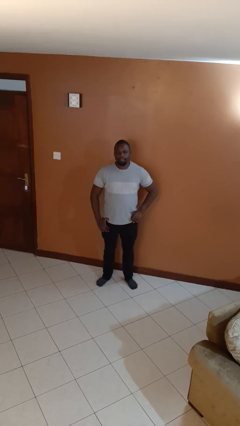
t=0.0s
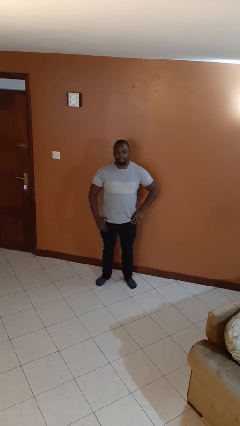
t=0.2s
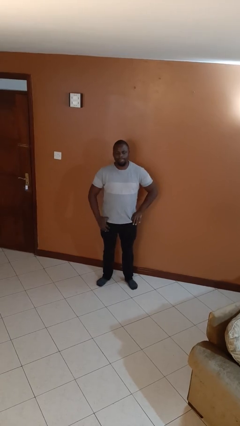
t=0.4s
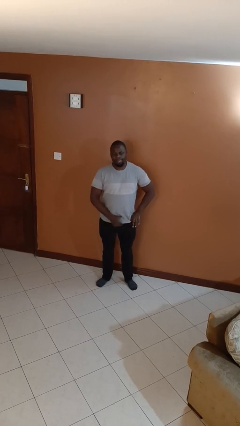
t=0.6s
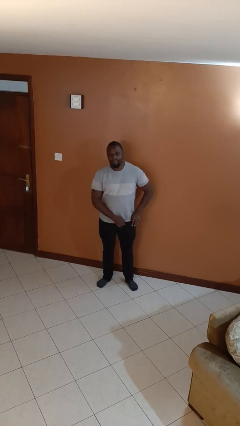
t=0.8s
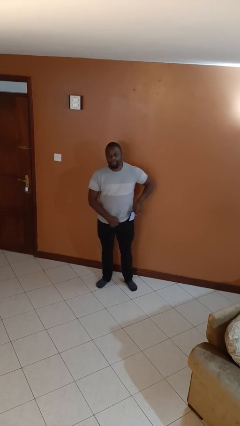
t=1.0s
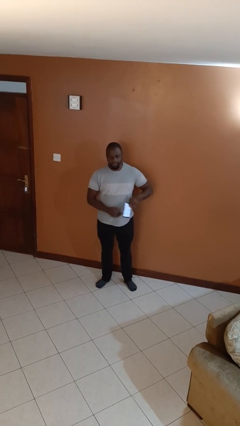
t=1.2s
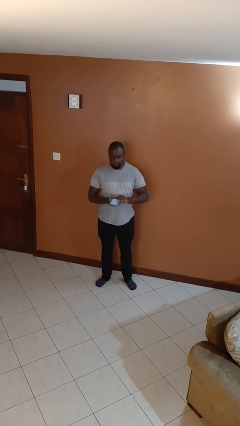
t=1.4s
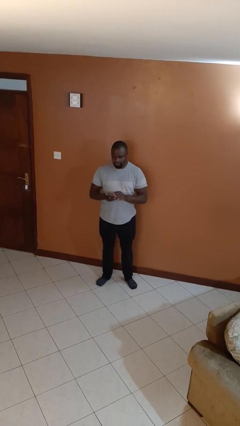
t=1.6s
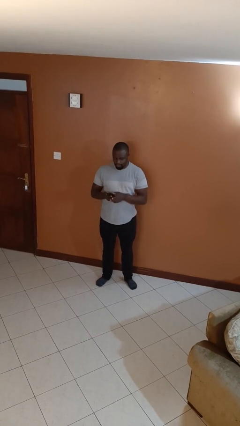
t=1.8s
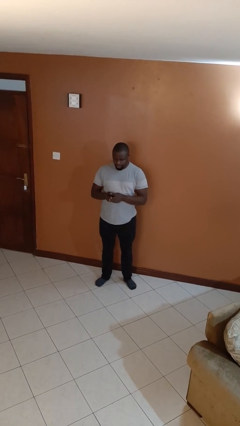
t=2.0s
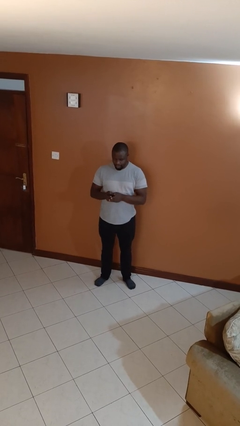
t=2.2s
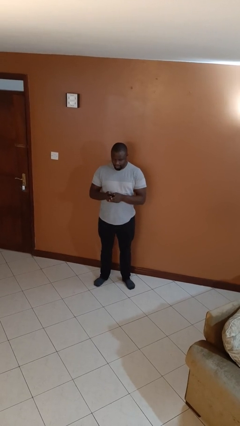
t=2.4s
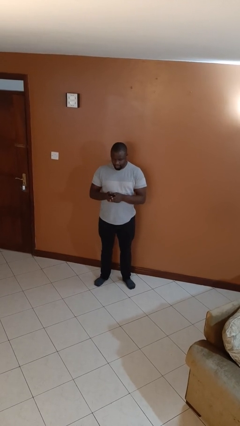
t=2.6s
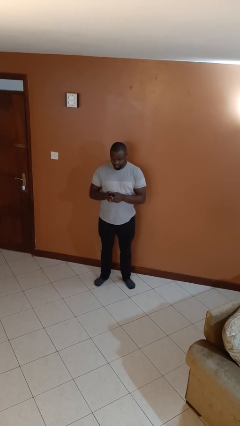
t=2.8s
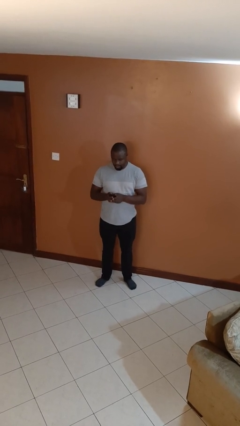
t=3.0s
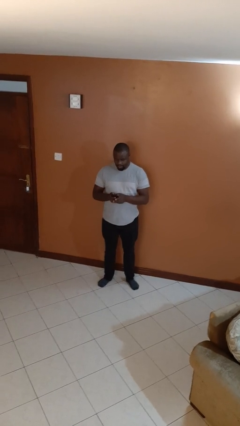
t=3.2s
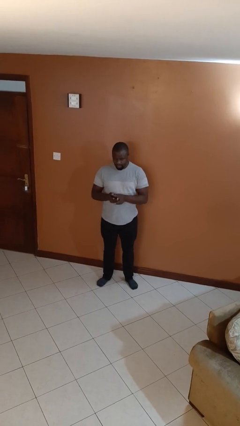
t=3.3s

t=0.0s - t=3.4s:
person takes phone from pocket

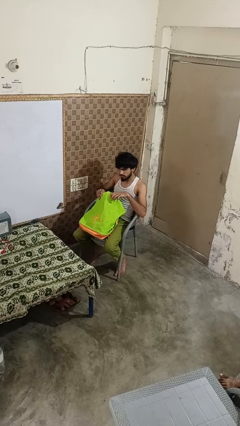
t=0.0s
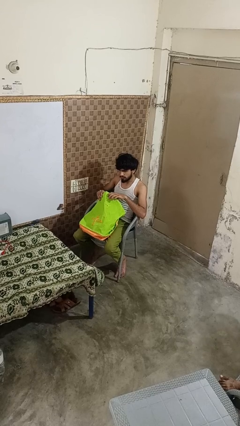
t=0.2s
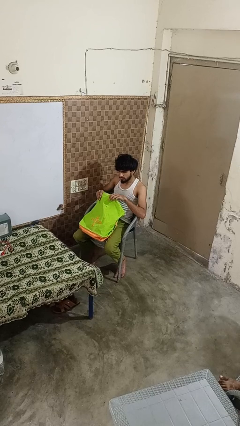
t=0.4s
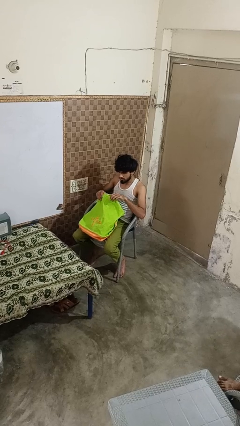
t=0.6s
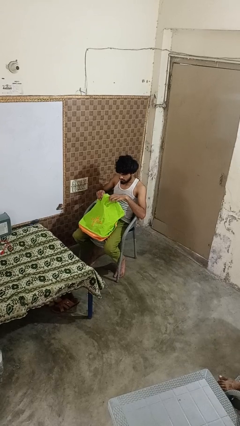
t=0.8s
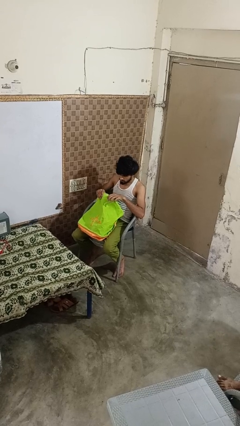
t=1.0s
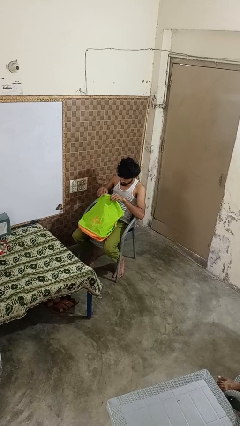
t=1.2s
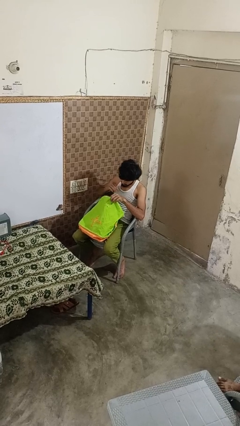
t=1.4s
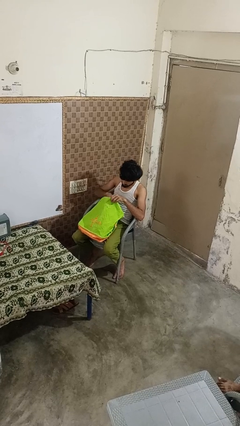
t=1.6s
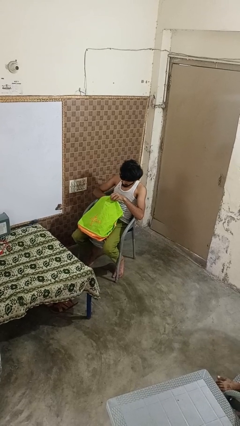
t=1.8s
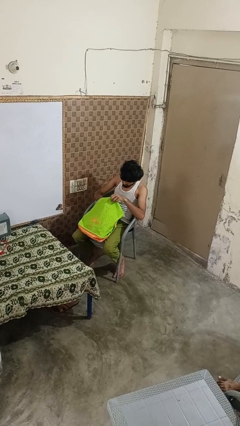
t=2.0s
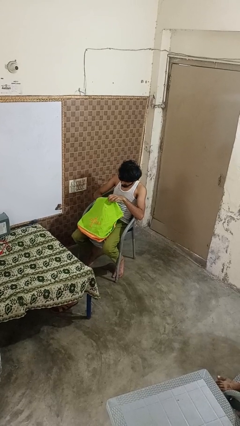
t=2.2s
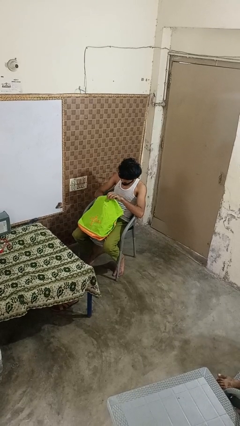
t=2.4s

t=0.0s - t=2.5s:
person searches in bag

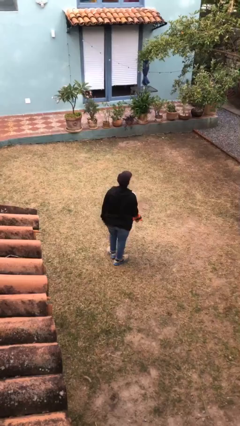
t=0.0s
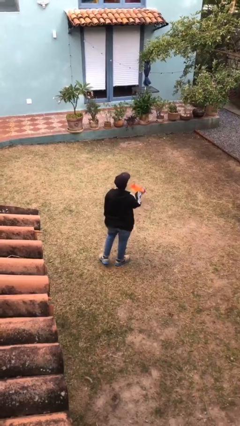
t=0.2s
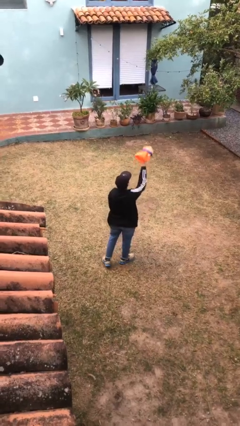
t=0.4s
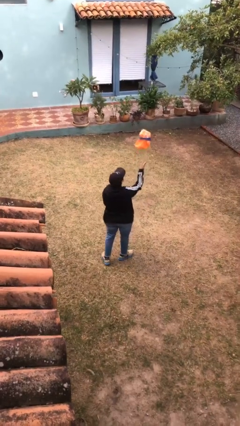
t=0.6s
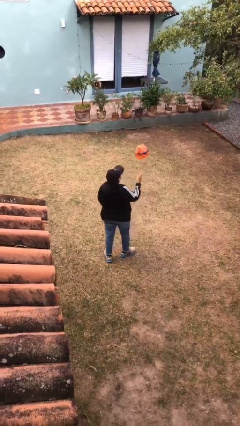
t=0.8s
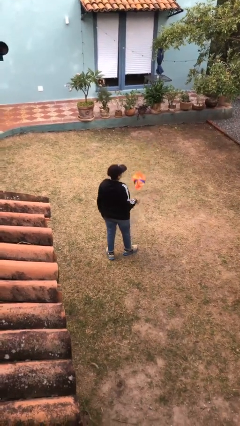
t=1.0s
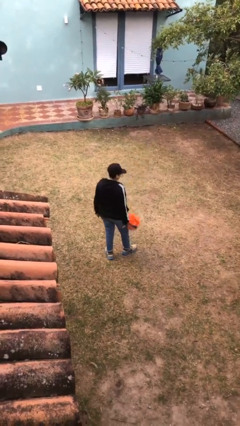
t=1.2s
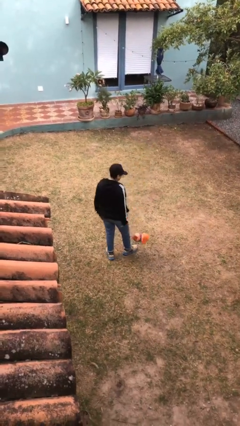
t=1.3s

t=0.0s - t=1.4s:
person throws object into air

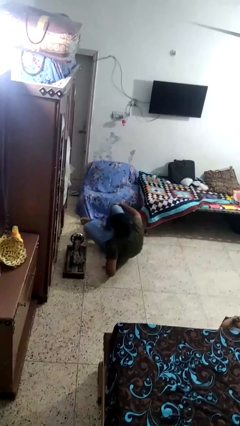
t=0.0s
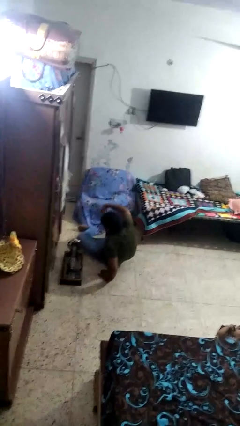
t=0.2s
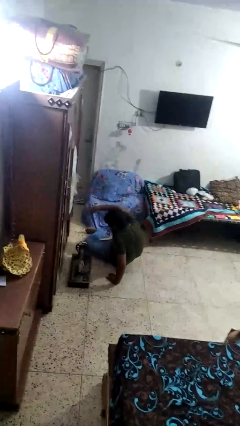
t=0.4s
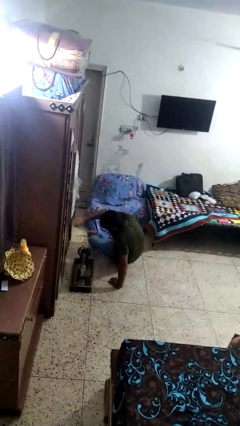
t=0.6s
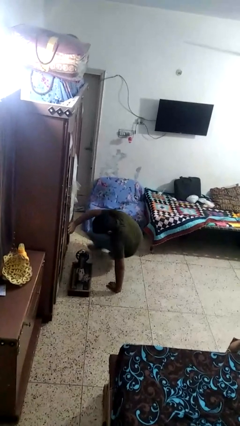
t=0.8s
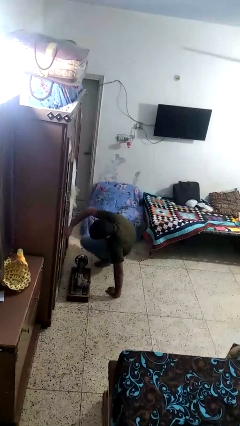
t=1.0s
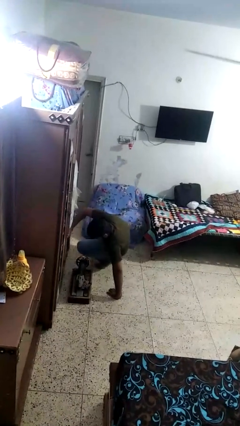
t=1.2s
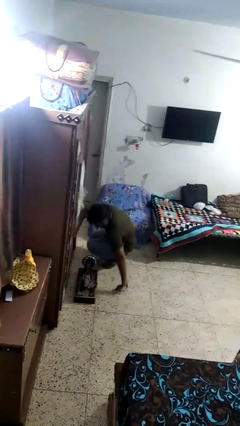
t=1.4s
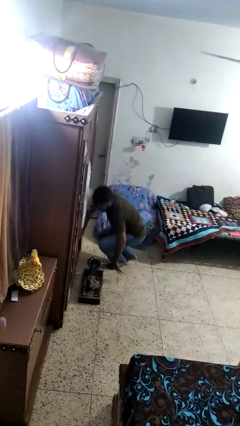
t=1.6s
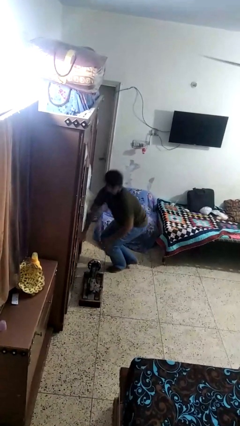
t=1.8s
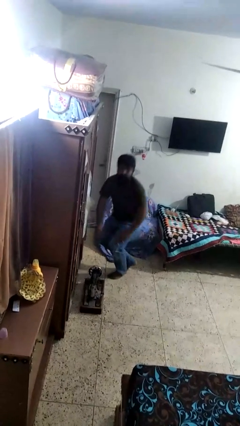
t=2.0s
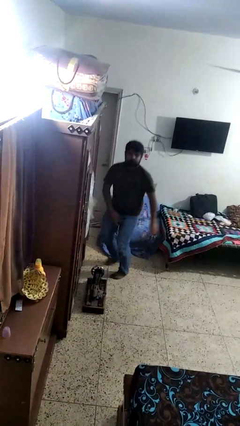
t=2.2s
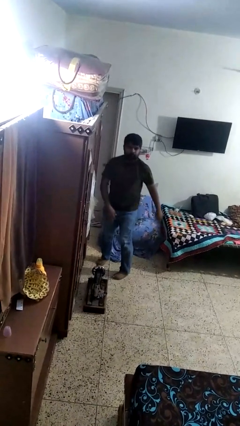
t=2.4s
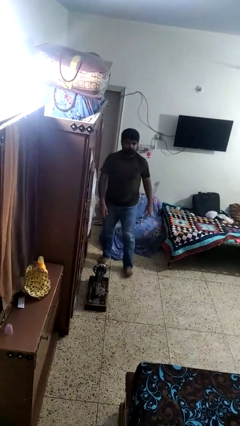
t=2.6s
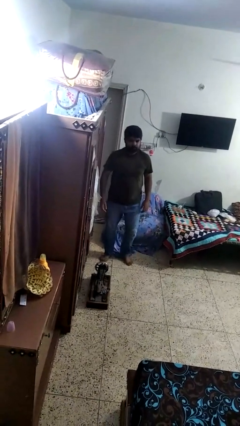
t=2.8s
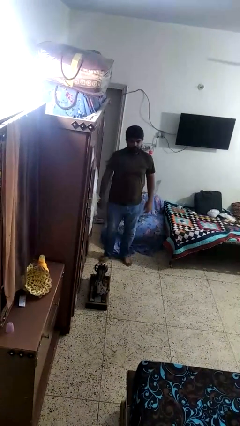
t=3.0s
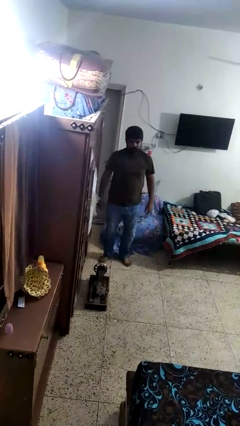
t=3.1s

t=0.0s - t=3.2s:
person stands up from floor

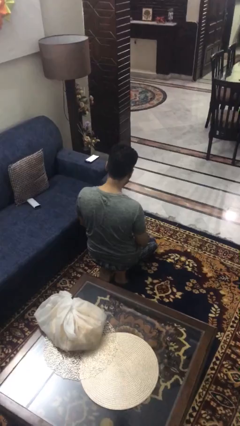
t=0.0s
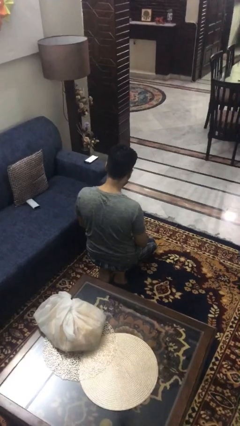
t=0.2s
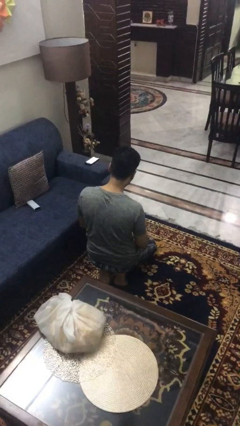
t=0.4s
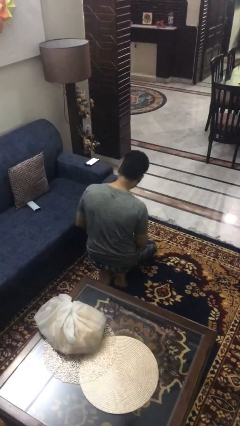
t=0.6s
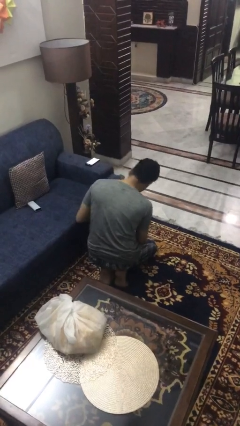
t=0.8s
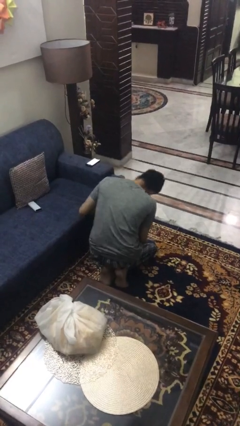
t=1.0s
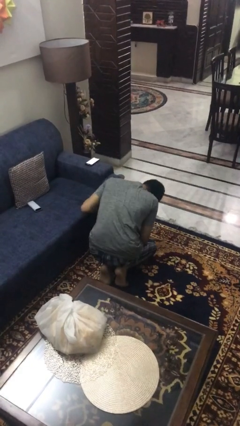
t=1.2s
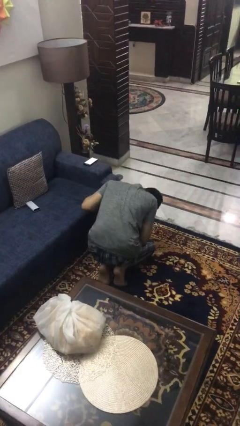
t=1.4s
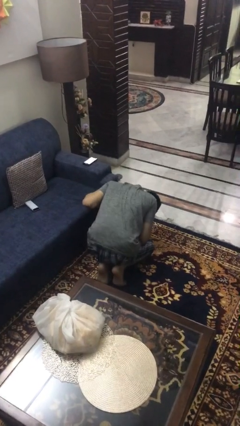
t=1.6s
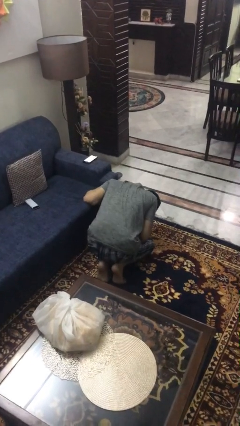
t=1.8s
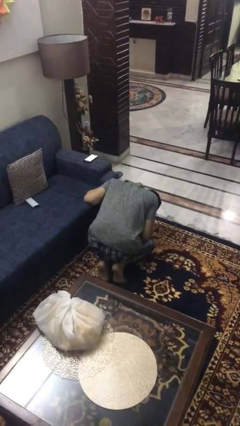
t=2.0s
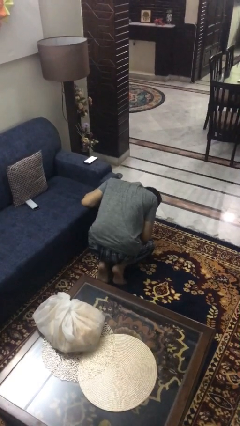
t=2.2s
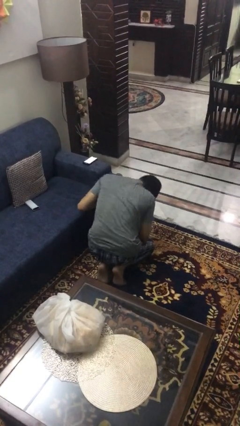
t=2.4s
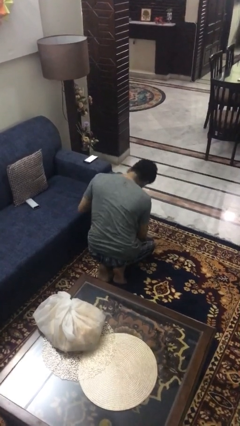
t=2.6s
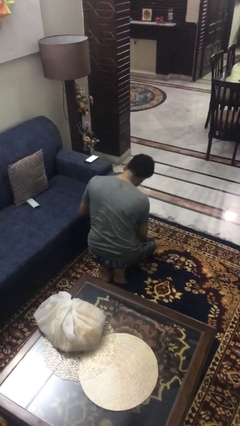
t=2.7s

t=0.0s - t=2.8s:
person searches under couch

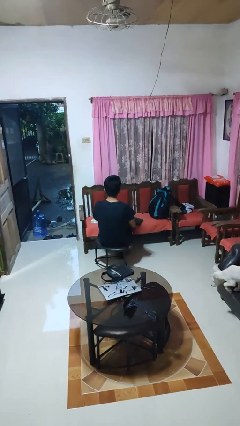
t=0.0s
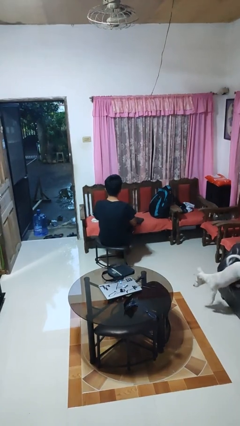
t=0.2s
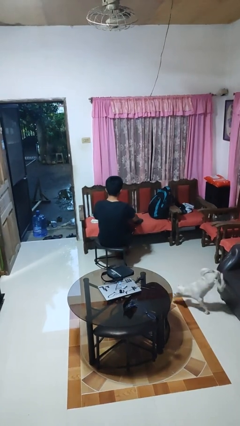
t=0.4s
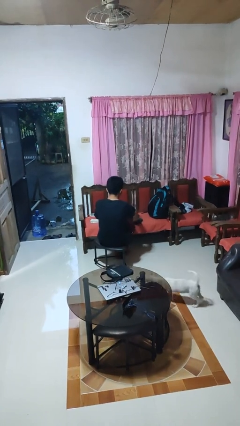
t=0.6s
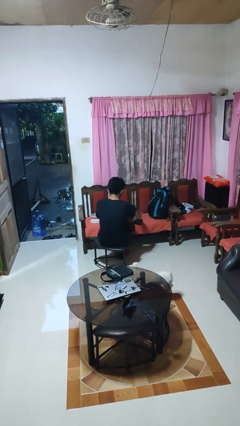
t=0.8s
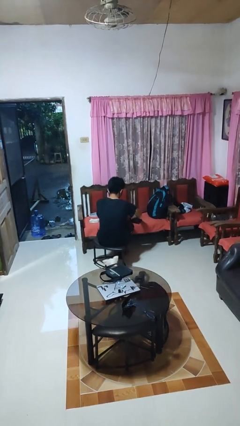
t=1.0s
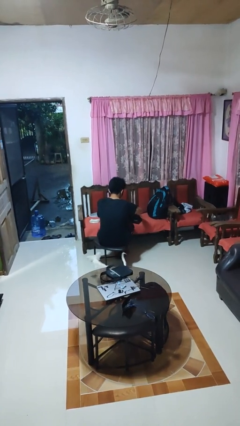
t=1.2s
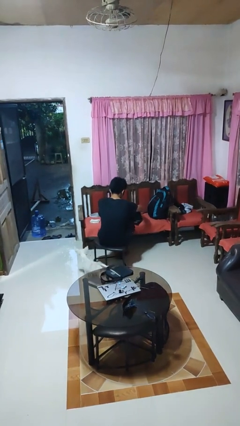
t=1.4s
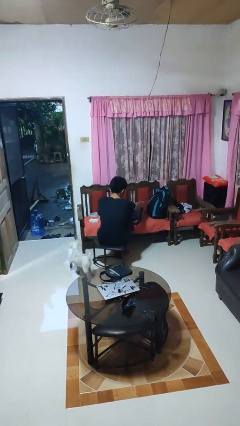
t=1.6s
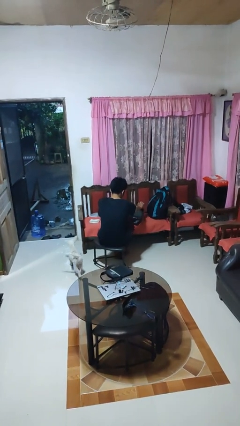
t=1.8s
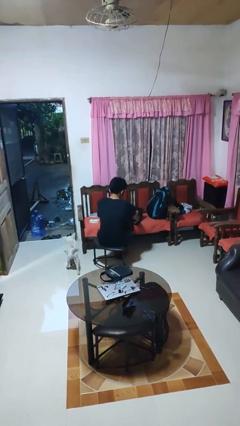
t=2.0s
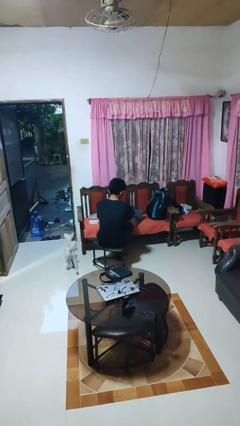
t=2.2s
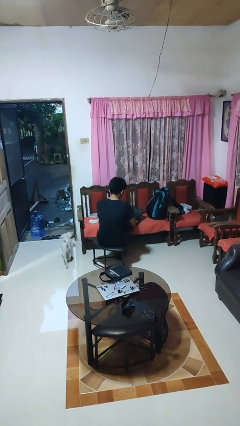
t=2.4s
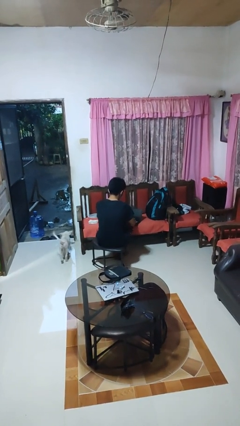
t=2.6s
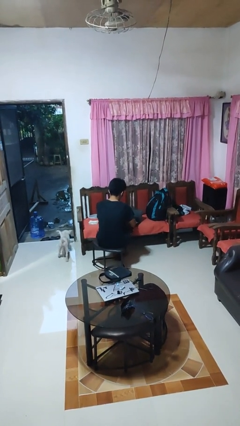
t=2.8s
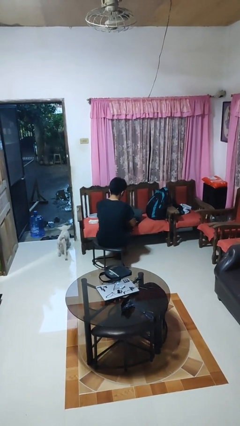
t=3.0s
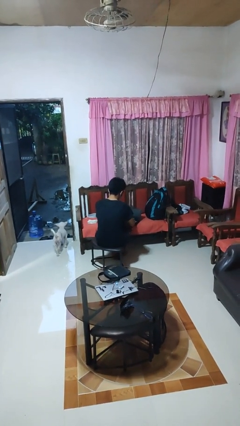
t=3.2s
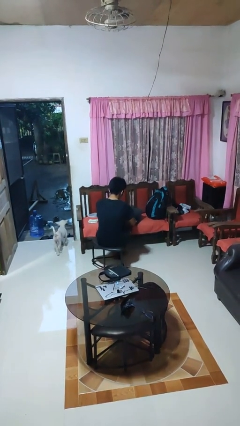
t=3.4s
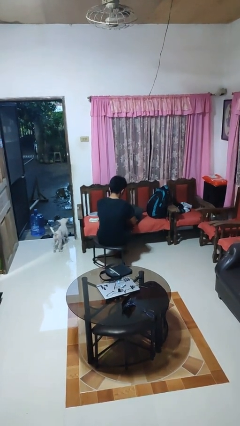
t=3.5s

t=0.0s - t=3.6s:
person opens laptop

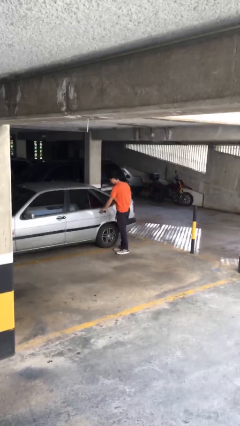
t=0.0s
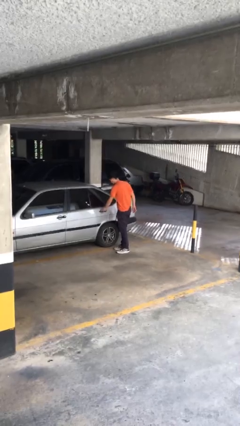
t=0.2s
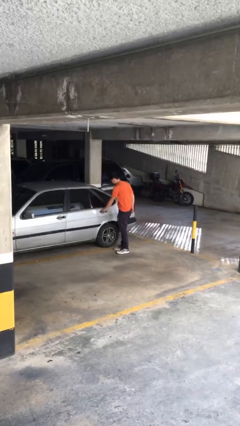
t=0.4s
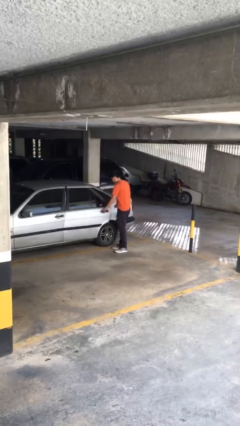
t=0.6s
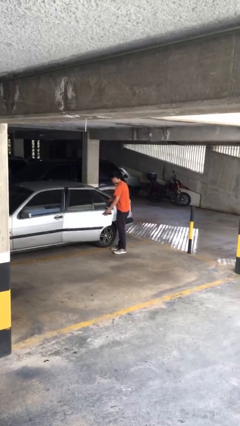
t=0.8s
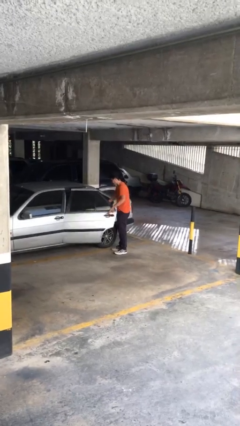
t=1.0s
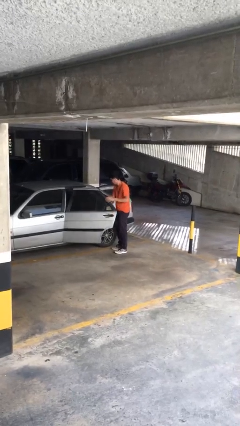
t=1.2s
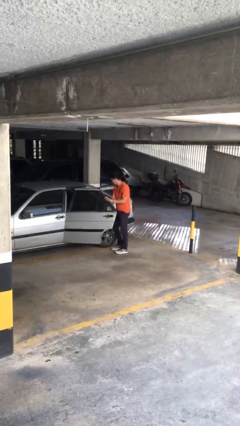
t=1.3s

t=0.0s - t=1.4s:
person opens car door
